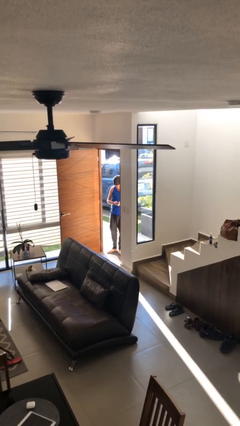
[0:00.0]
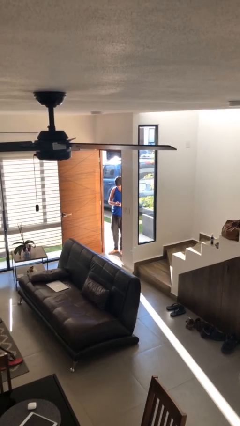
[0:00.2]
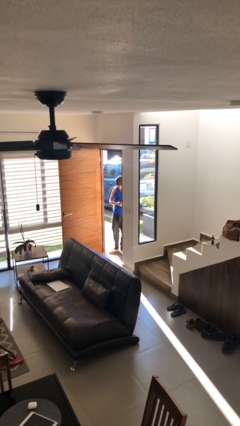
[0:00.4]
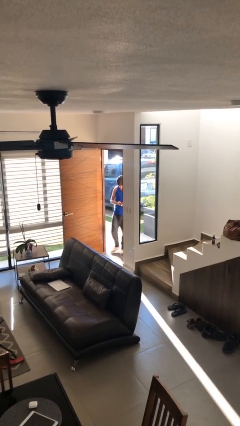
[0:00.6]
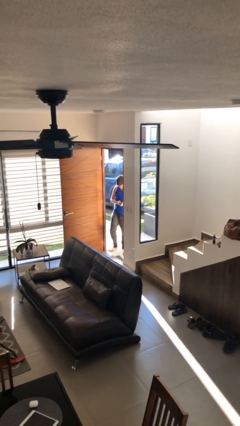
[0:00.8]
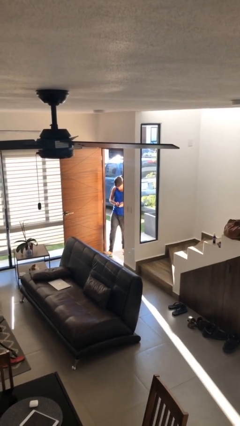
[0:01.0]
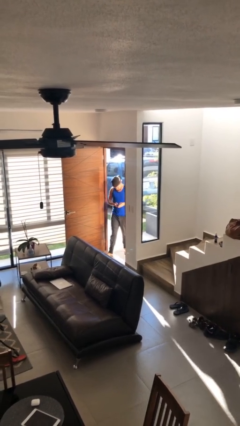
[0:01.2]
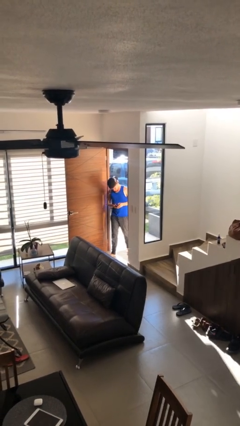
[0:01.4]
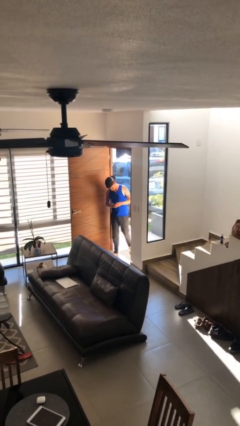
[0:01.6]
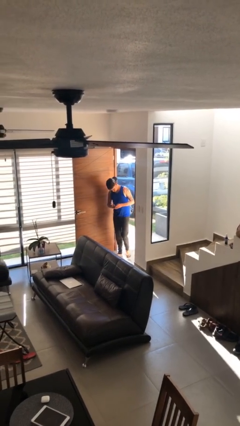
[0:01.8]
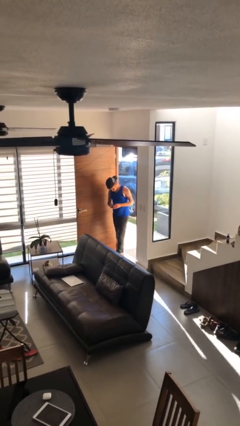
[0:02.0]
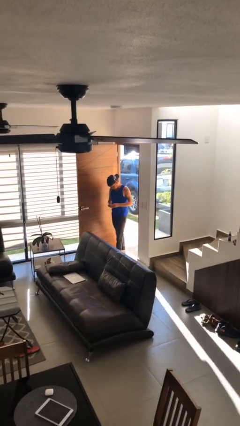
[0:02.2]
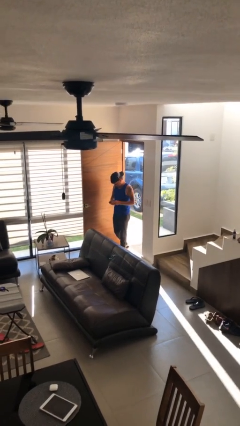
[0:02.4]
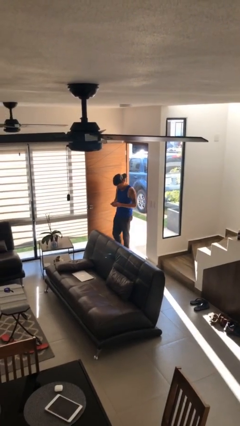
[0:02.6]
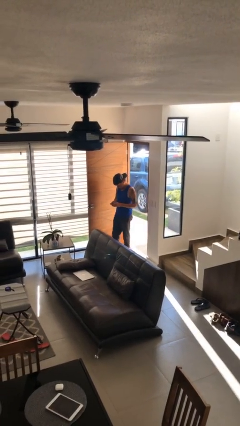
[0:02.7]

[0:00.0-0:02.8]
person enters scene through structure

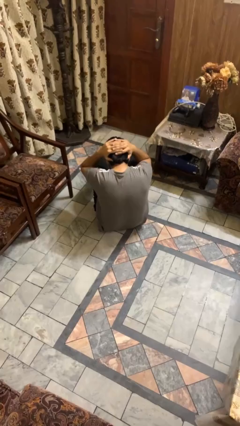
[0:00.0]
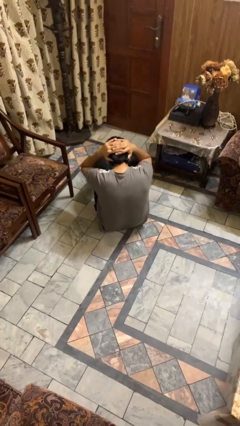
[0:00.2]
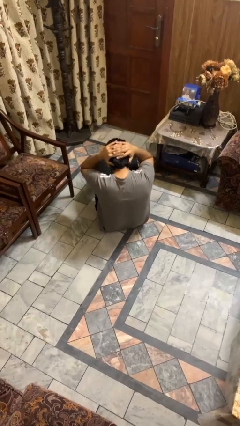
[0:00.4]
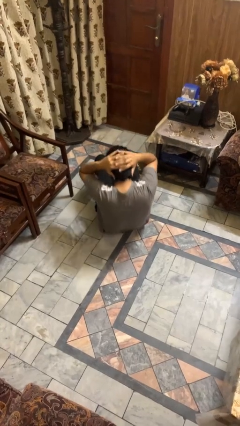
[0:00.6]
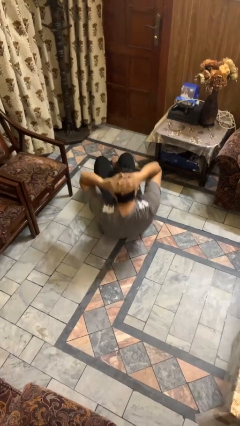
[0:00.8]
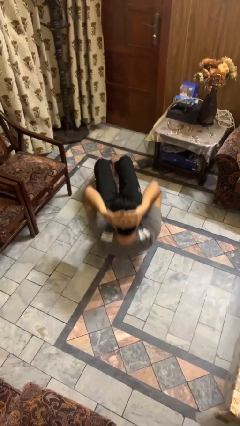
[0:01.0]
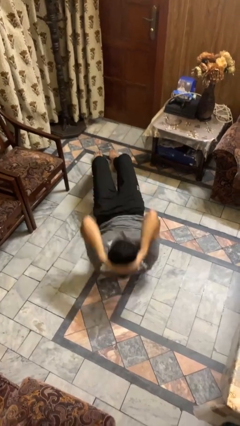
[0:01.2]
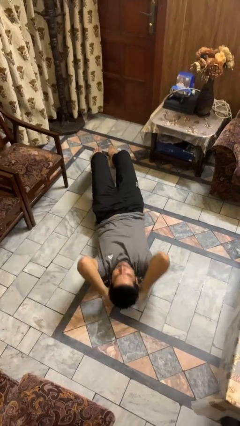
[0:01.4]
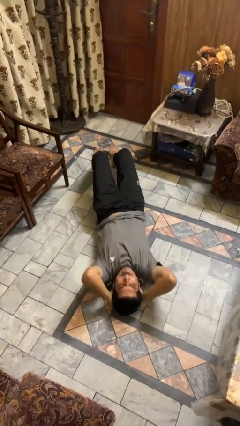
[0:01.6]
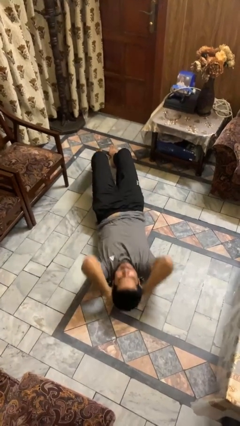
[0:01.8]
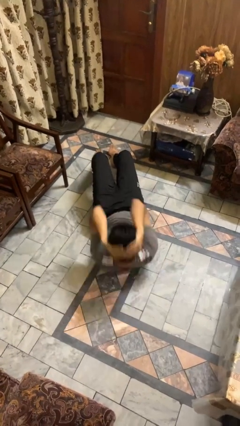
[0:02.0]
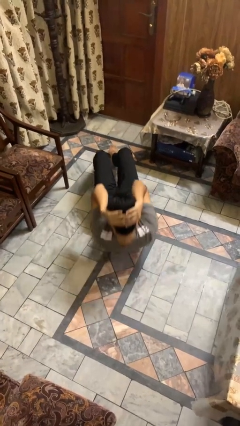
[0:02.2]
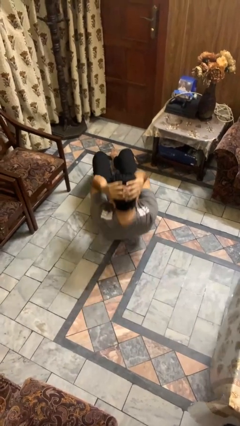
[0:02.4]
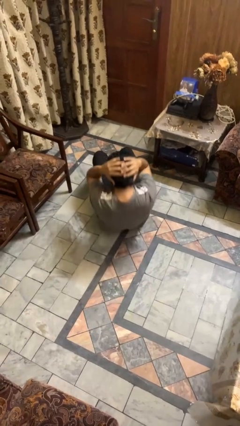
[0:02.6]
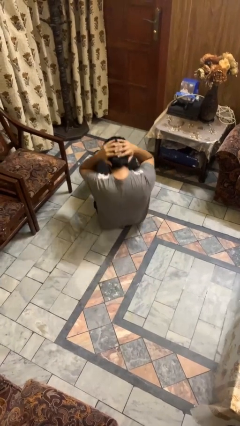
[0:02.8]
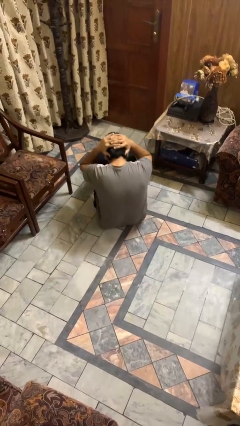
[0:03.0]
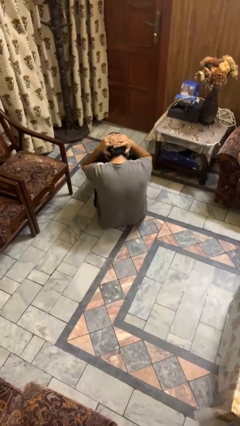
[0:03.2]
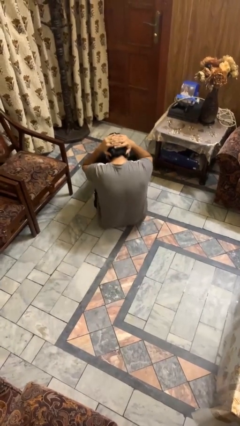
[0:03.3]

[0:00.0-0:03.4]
person exercises with situp

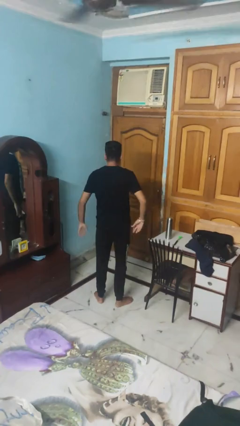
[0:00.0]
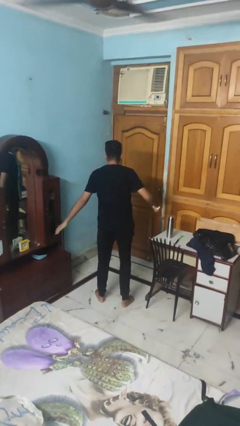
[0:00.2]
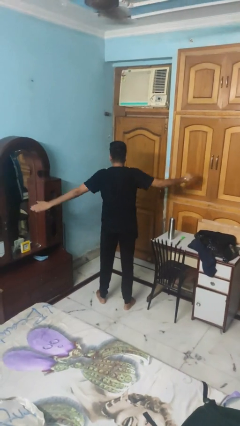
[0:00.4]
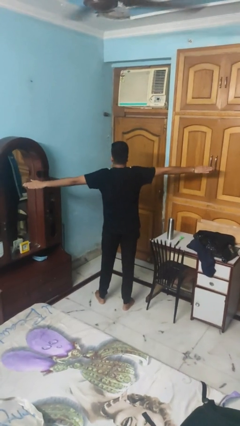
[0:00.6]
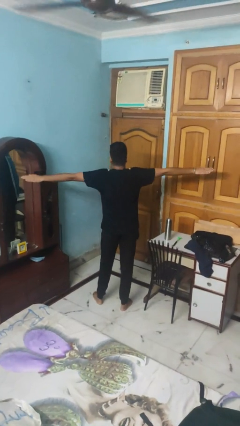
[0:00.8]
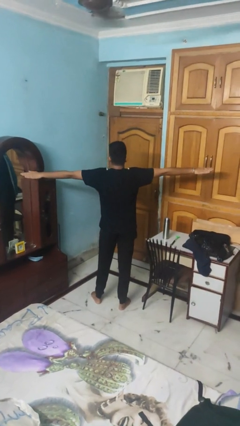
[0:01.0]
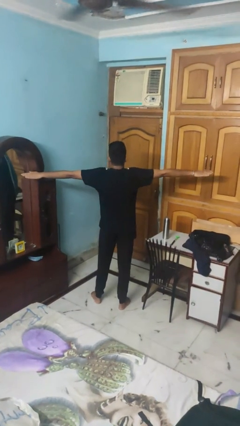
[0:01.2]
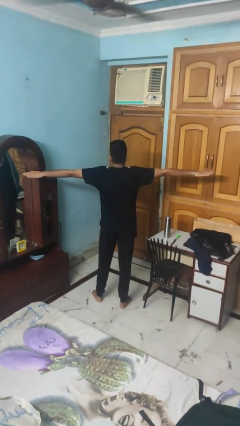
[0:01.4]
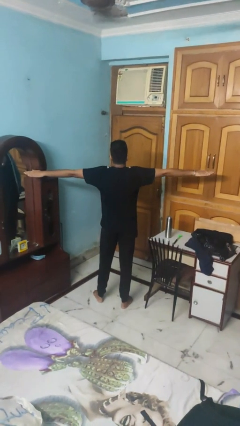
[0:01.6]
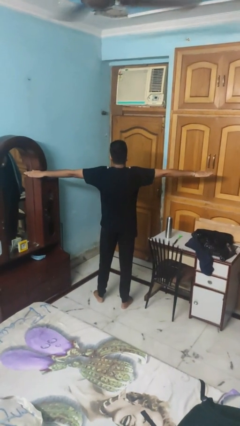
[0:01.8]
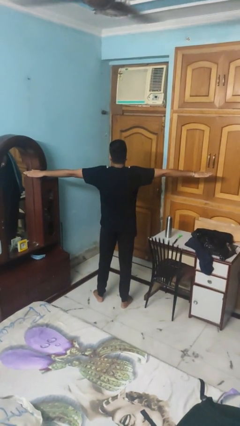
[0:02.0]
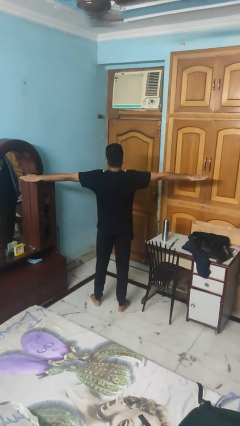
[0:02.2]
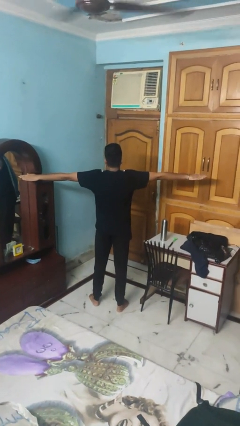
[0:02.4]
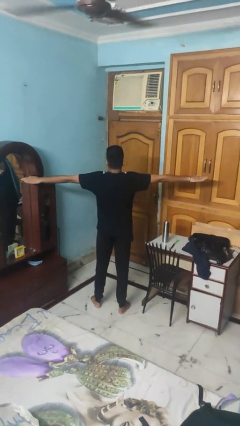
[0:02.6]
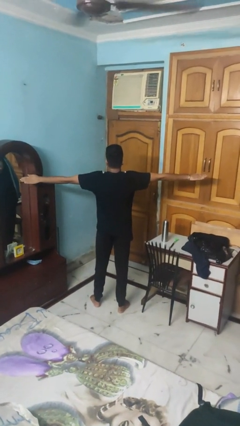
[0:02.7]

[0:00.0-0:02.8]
person stretches arms to side

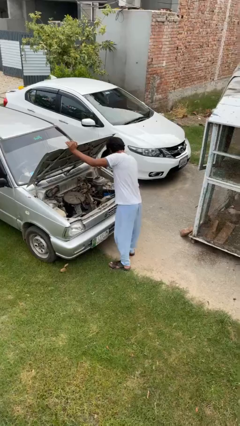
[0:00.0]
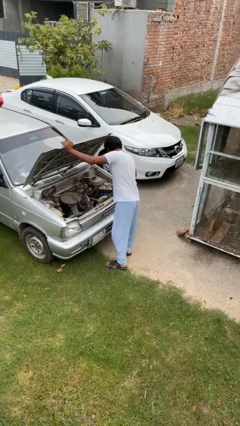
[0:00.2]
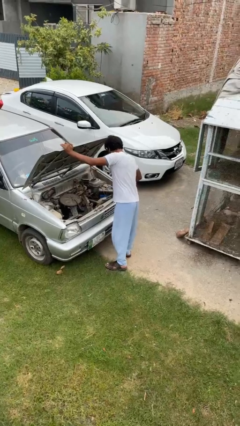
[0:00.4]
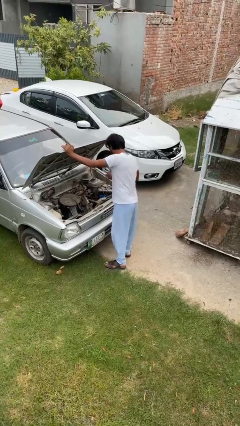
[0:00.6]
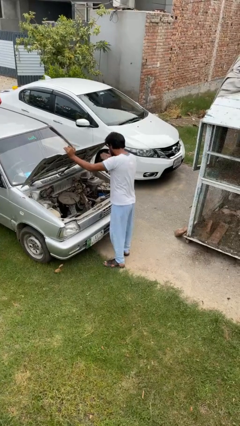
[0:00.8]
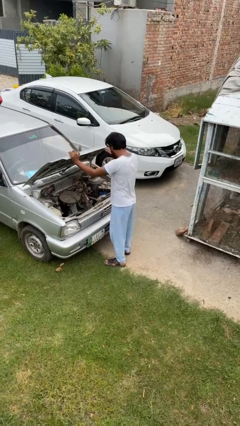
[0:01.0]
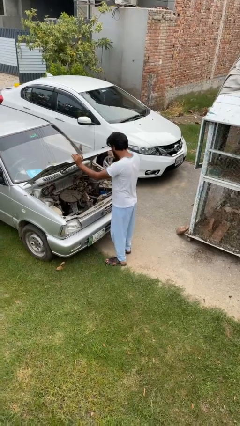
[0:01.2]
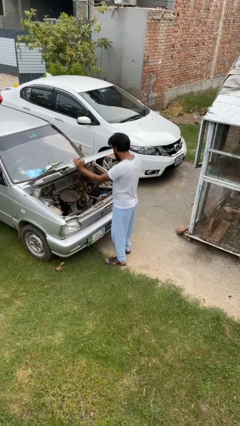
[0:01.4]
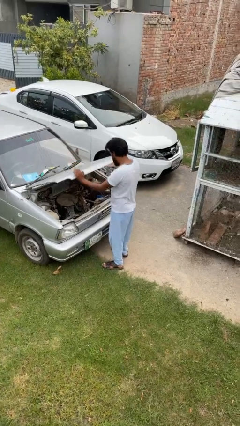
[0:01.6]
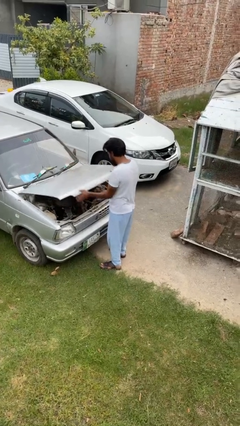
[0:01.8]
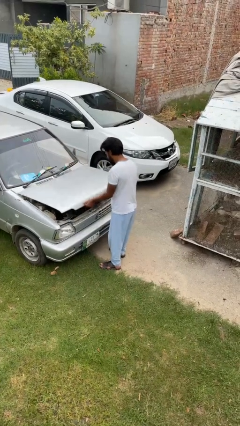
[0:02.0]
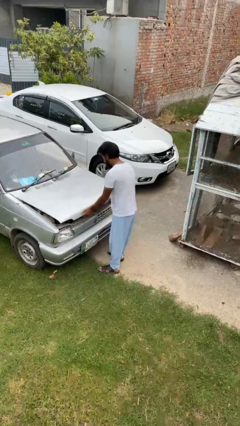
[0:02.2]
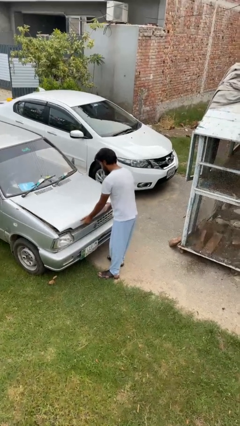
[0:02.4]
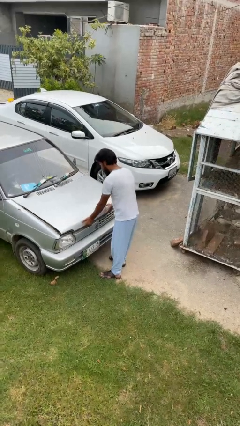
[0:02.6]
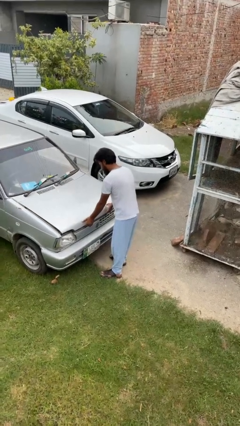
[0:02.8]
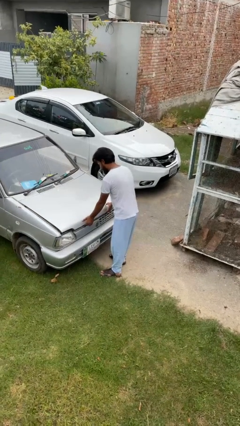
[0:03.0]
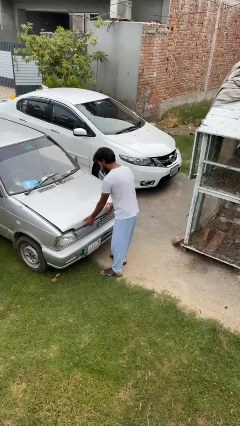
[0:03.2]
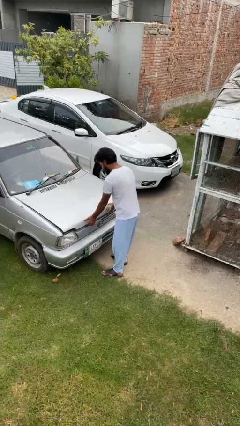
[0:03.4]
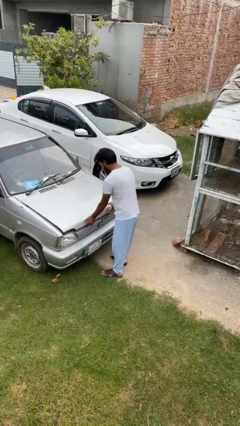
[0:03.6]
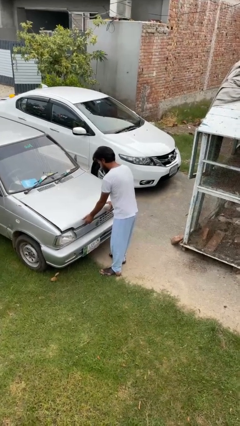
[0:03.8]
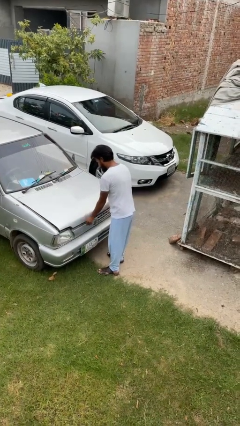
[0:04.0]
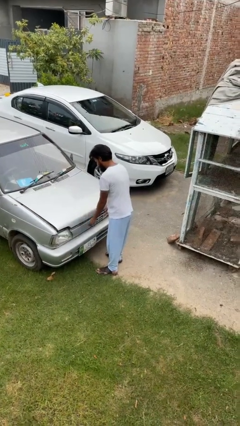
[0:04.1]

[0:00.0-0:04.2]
person closes car hood

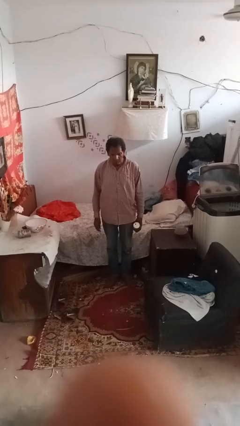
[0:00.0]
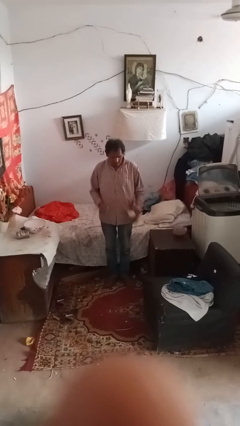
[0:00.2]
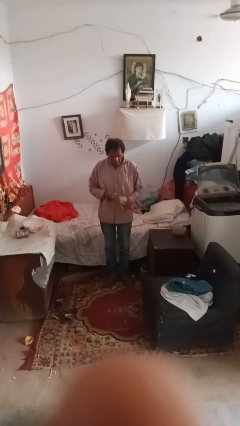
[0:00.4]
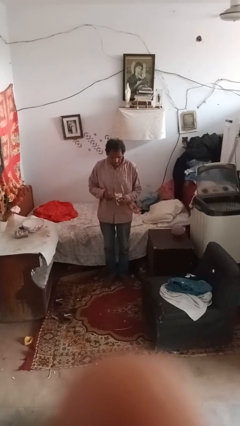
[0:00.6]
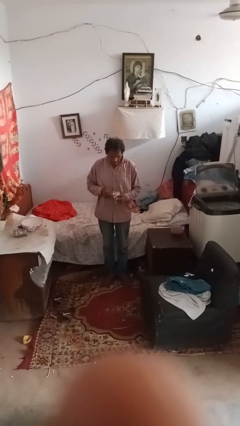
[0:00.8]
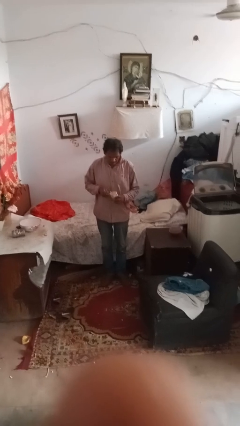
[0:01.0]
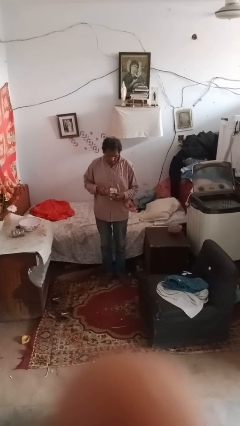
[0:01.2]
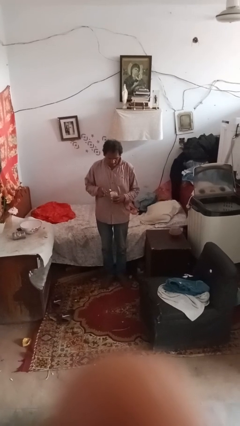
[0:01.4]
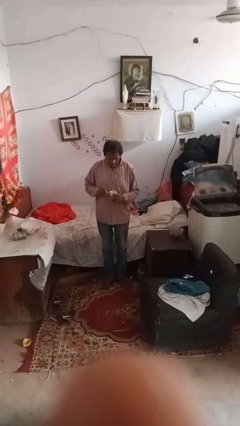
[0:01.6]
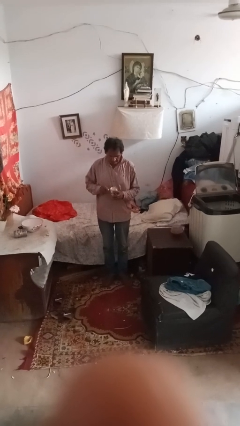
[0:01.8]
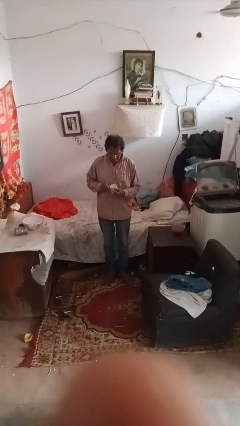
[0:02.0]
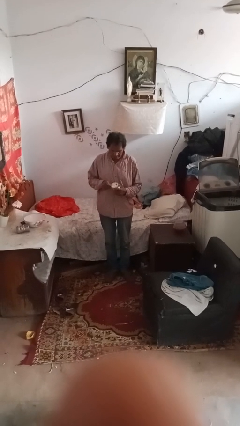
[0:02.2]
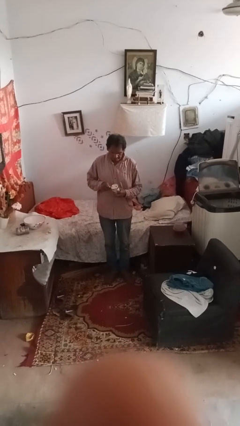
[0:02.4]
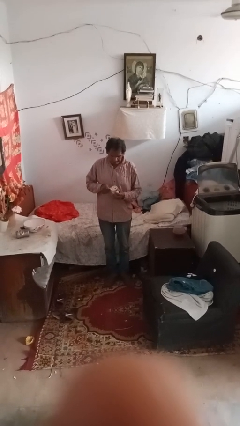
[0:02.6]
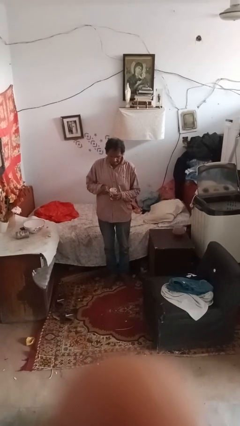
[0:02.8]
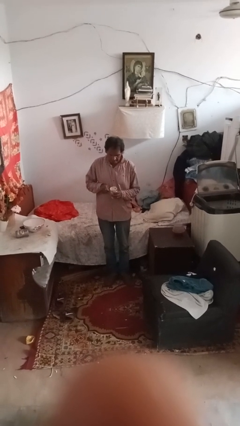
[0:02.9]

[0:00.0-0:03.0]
person opens can with can opener

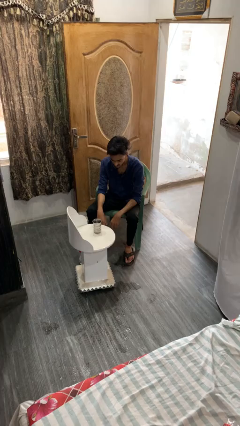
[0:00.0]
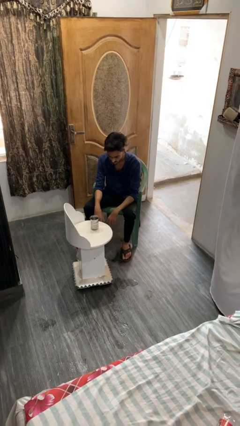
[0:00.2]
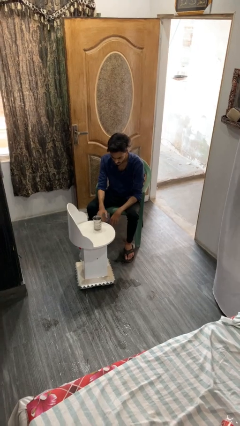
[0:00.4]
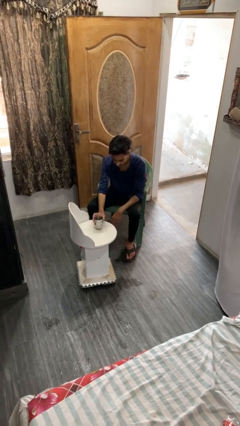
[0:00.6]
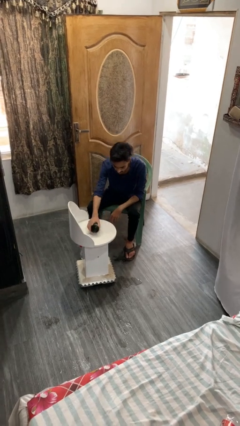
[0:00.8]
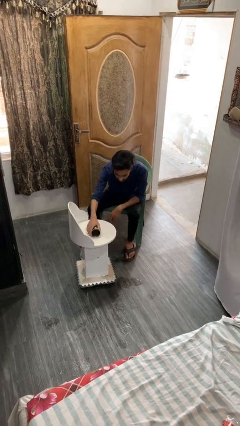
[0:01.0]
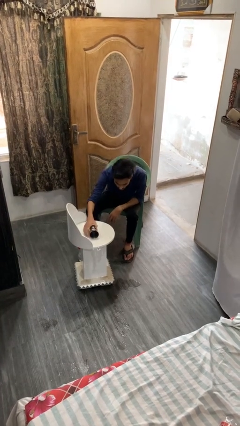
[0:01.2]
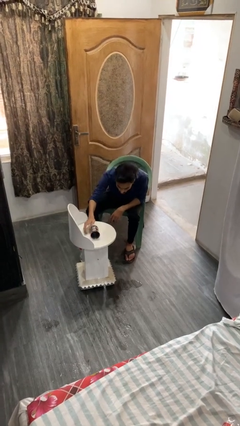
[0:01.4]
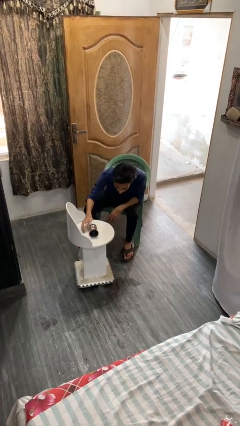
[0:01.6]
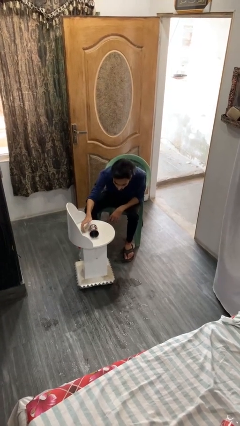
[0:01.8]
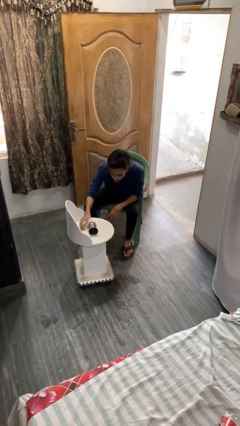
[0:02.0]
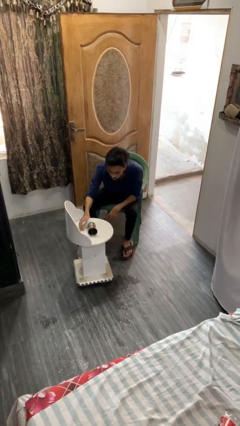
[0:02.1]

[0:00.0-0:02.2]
person spills on table
